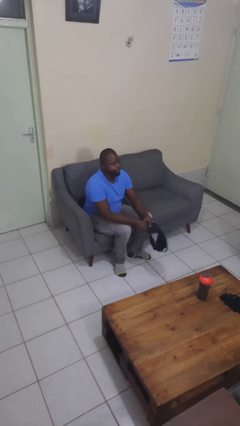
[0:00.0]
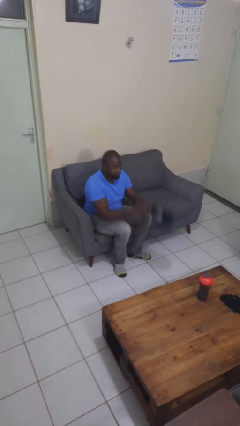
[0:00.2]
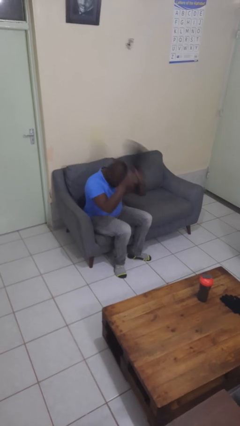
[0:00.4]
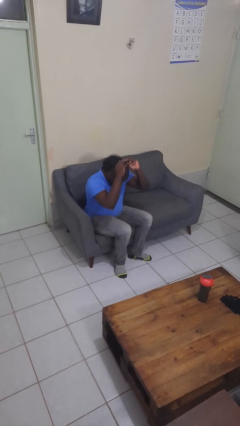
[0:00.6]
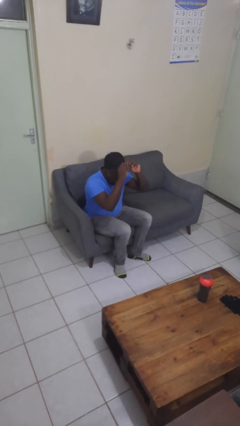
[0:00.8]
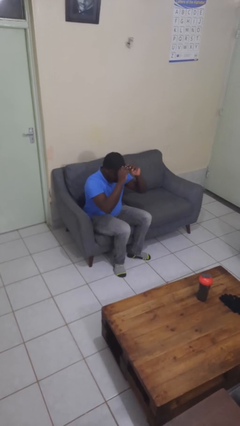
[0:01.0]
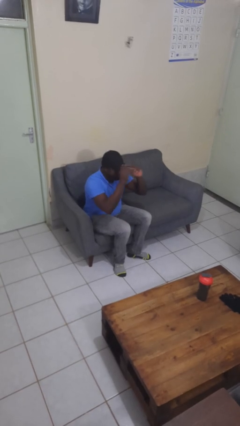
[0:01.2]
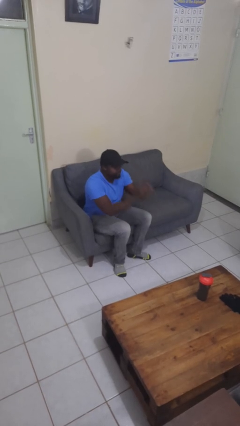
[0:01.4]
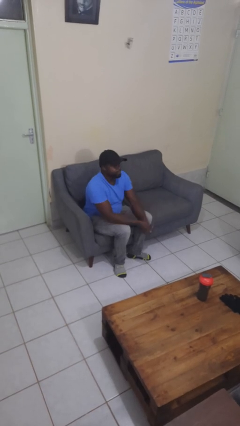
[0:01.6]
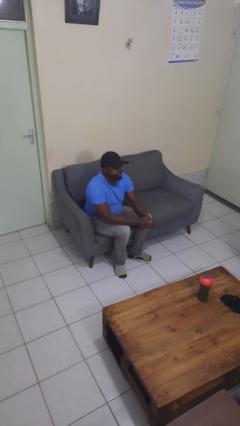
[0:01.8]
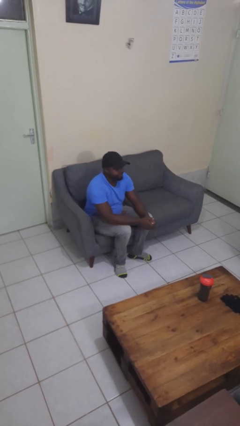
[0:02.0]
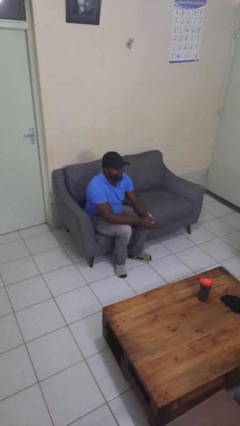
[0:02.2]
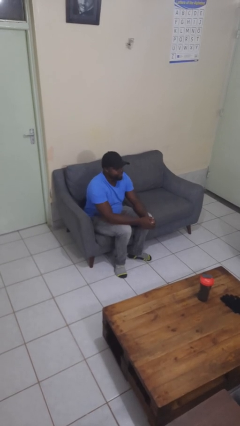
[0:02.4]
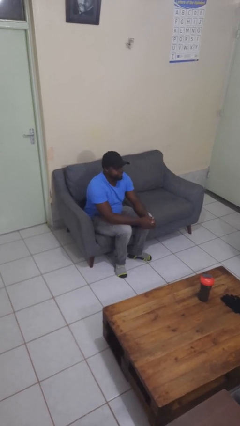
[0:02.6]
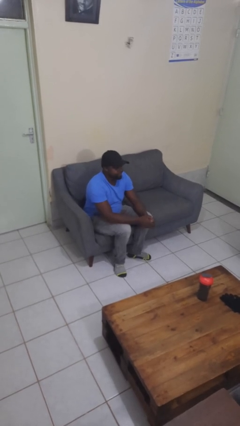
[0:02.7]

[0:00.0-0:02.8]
person puts on hat

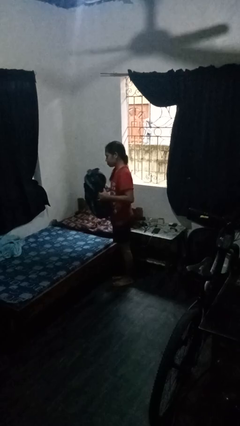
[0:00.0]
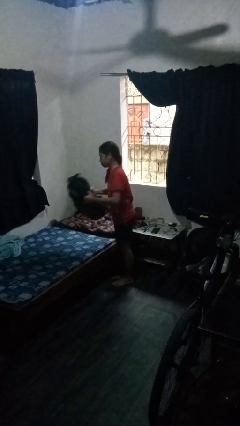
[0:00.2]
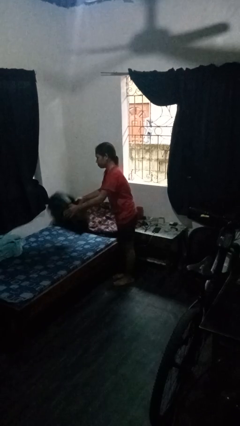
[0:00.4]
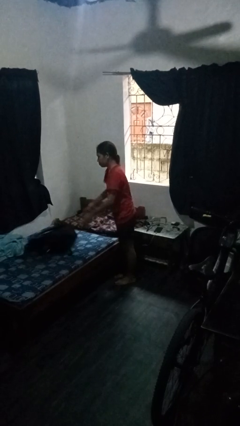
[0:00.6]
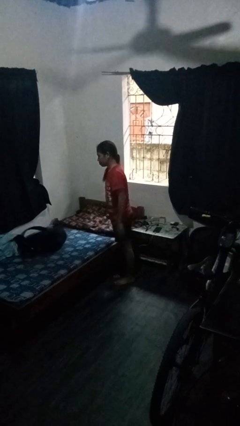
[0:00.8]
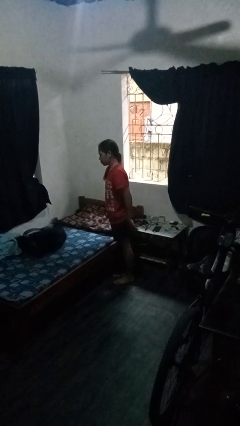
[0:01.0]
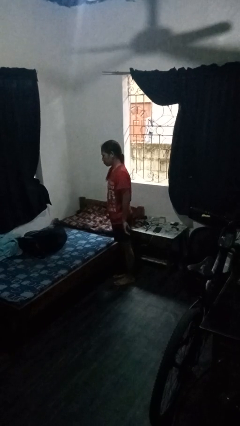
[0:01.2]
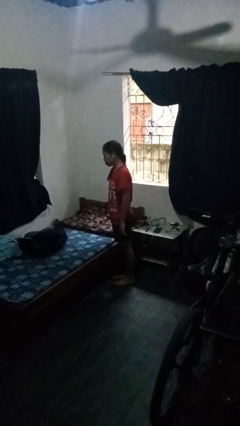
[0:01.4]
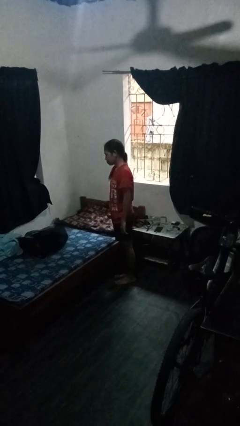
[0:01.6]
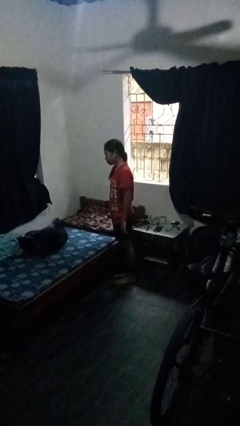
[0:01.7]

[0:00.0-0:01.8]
person throws object on bed

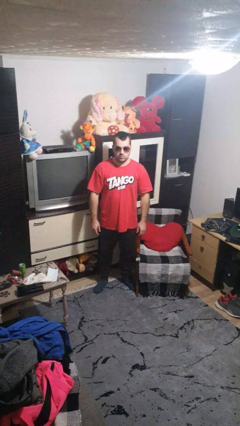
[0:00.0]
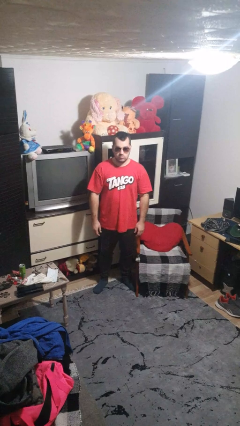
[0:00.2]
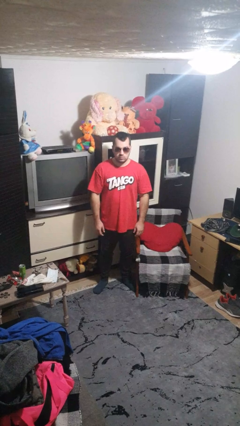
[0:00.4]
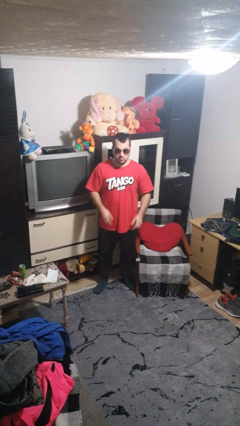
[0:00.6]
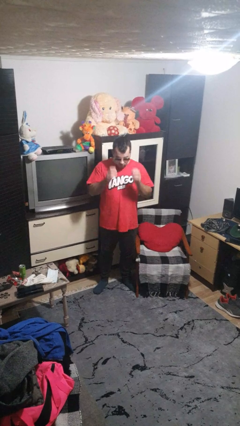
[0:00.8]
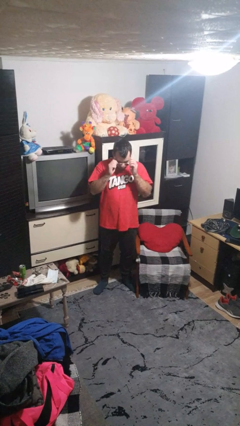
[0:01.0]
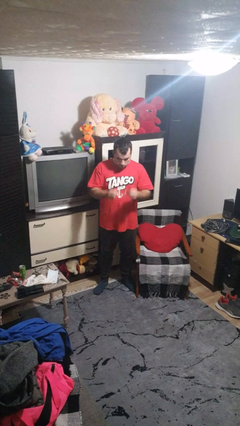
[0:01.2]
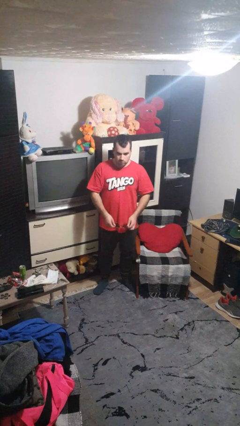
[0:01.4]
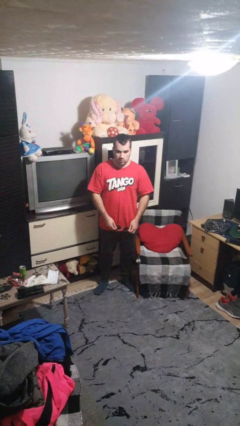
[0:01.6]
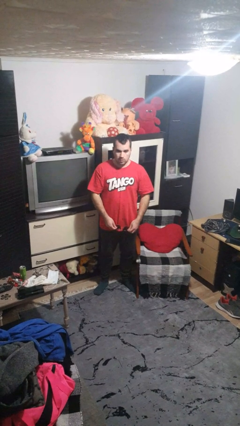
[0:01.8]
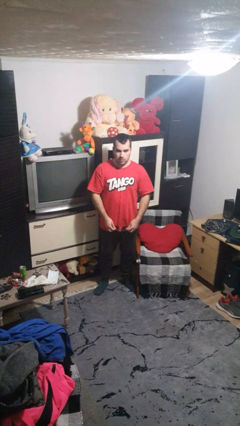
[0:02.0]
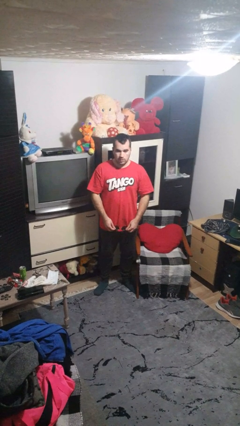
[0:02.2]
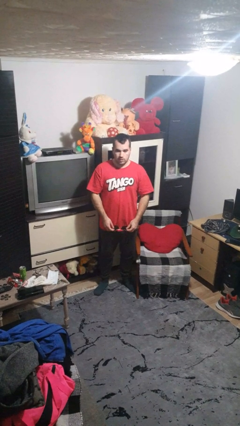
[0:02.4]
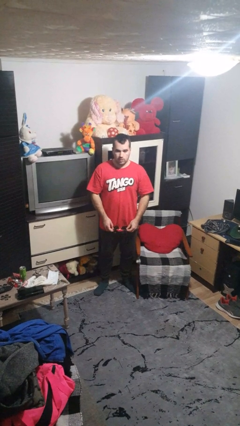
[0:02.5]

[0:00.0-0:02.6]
person takes off sunglasses

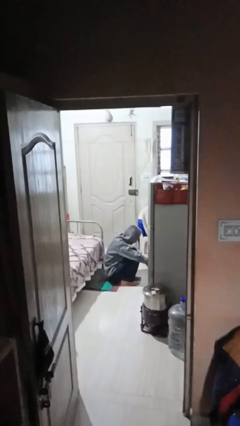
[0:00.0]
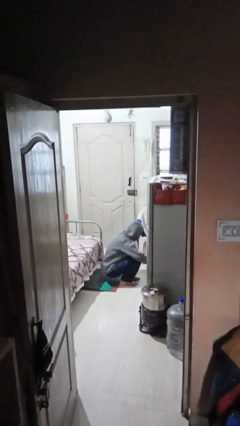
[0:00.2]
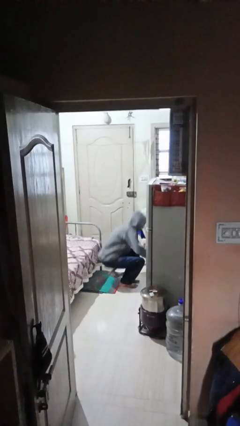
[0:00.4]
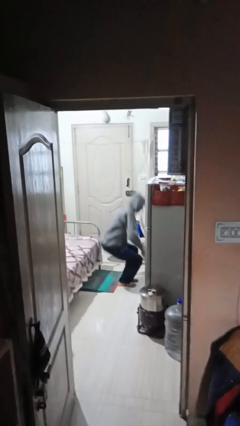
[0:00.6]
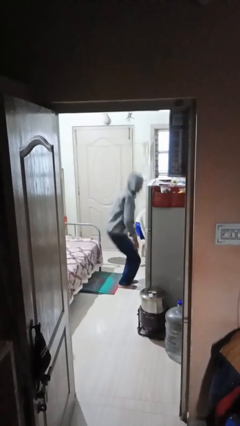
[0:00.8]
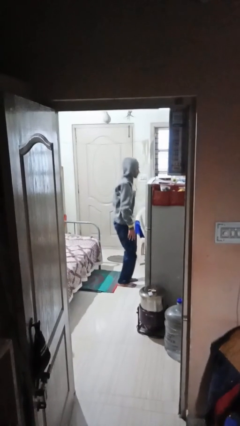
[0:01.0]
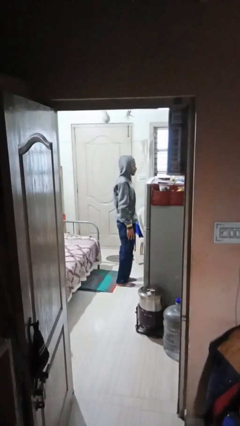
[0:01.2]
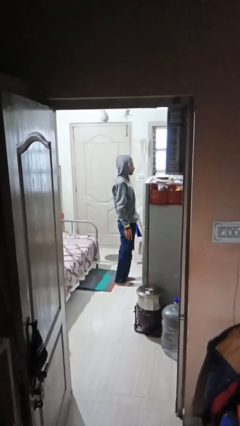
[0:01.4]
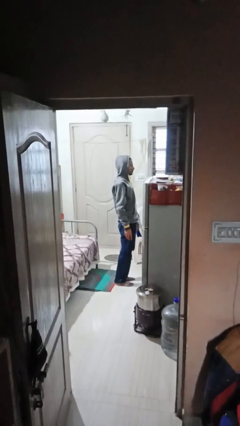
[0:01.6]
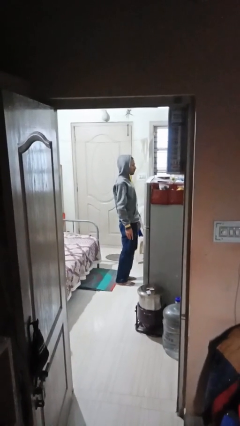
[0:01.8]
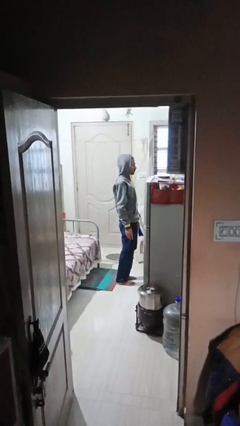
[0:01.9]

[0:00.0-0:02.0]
person stands up

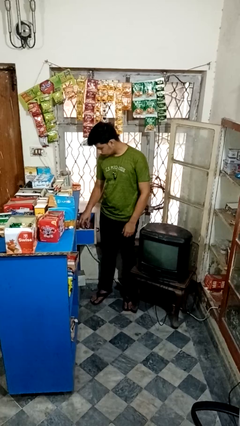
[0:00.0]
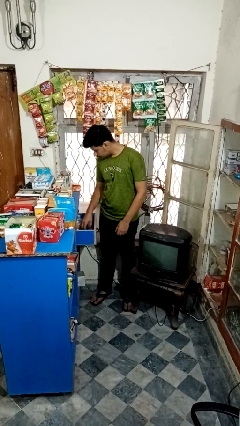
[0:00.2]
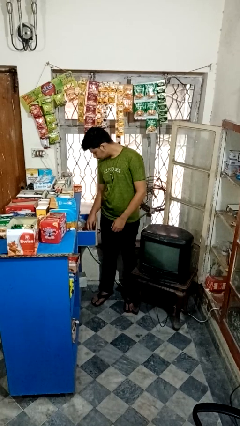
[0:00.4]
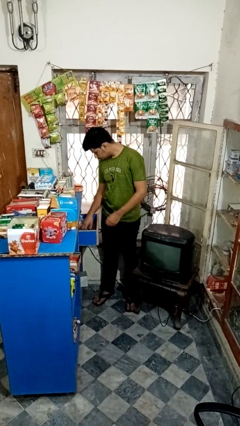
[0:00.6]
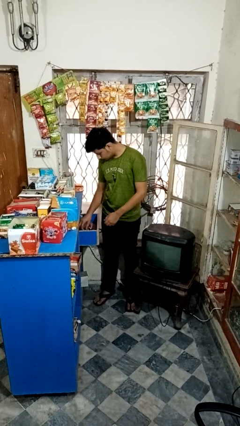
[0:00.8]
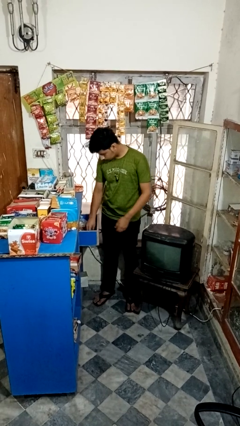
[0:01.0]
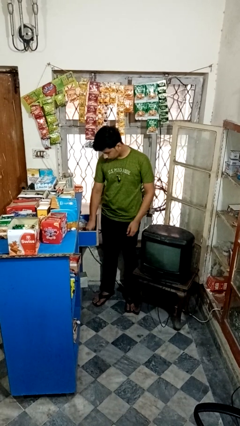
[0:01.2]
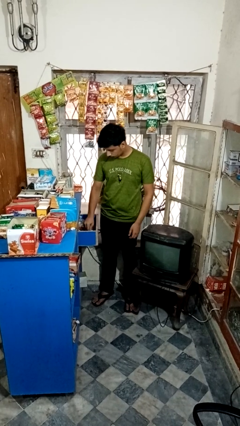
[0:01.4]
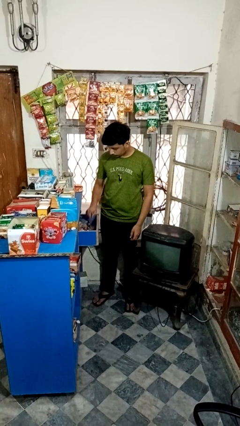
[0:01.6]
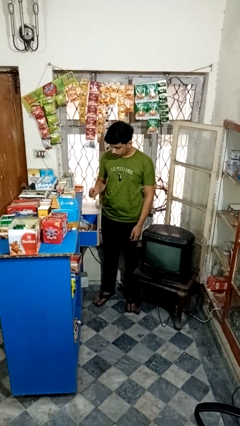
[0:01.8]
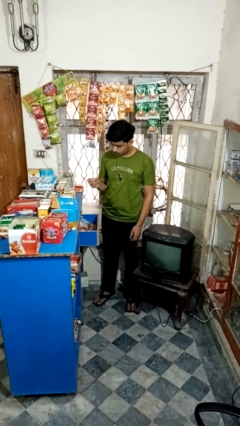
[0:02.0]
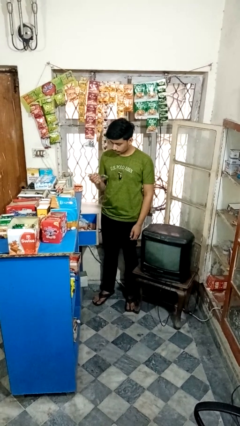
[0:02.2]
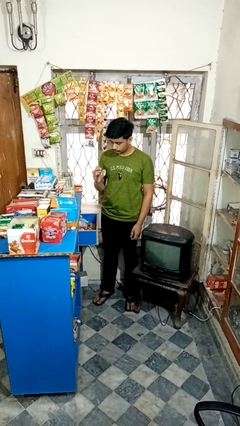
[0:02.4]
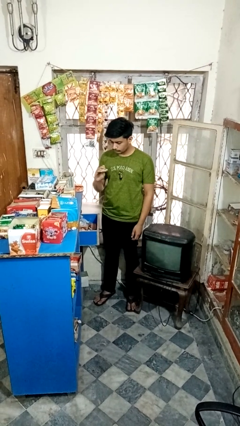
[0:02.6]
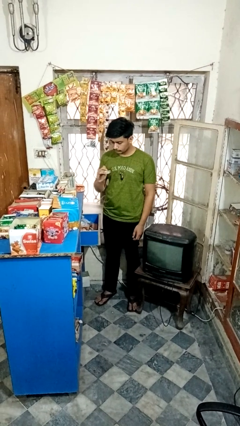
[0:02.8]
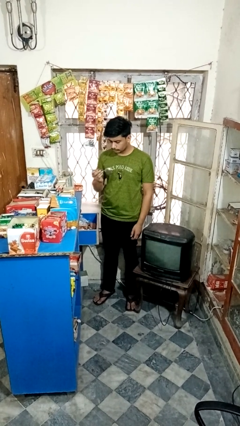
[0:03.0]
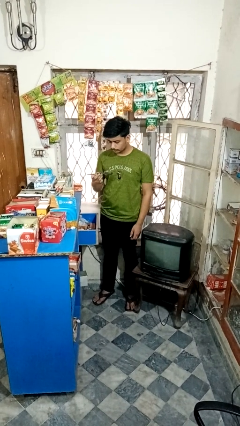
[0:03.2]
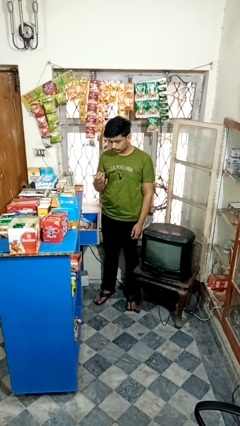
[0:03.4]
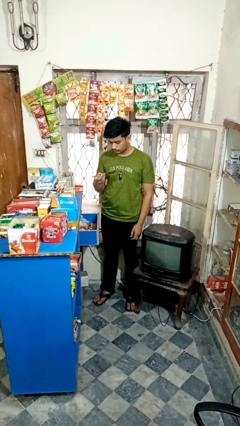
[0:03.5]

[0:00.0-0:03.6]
person searches in kitchen drawer

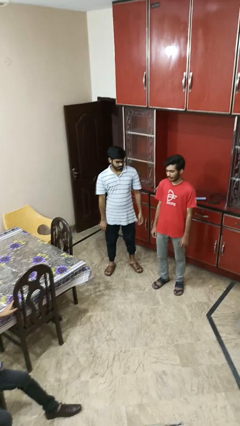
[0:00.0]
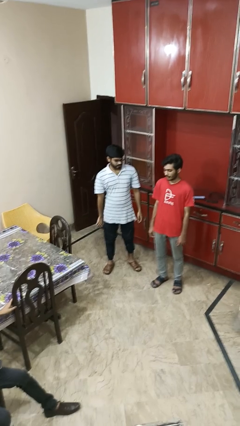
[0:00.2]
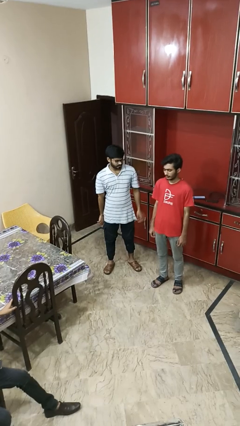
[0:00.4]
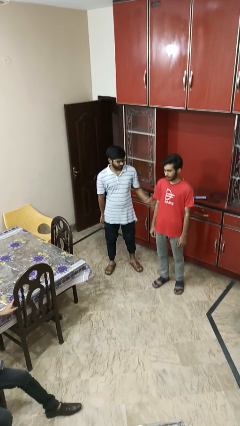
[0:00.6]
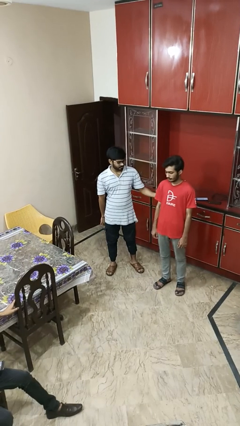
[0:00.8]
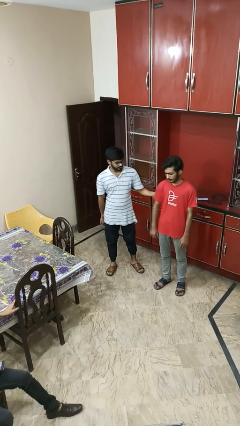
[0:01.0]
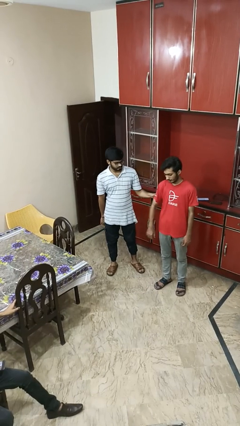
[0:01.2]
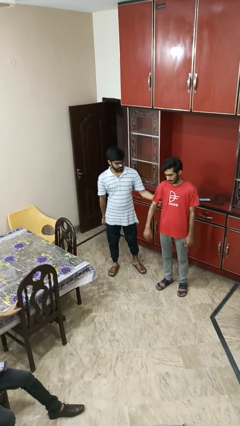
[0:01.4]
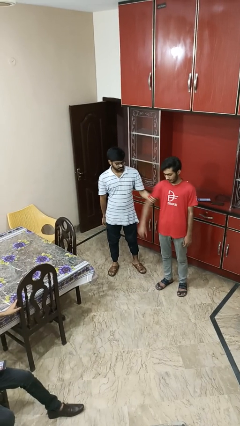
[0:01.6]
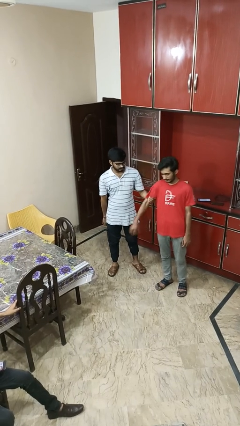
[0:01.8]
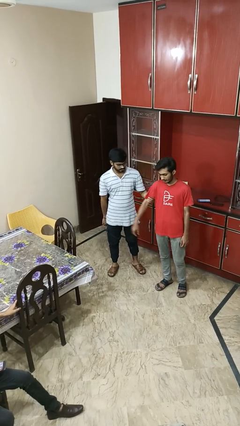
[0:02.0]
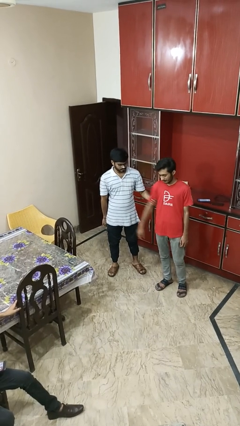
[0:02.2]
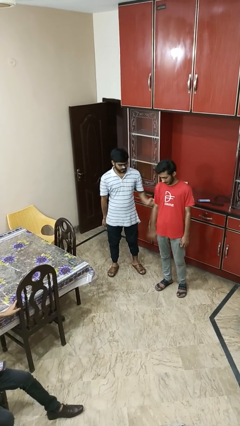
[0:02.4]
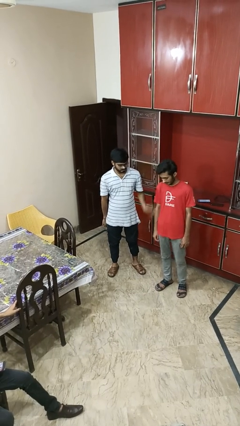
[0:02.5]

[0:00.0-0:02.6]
person grabs person by bicep

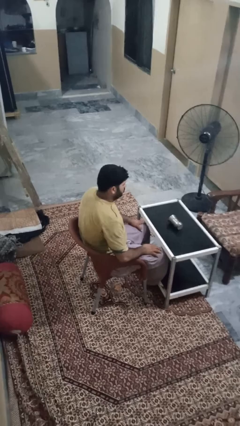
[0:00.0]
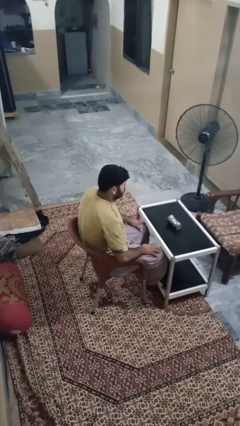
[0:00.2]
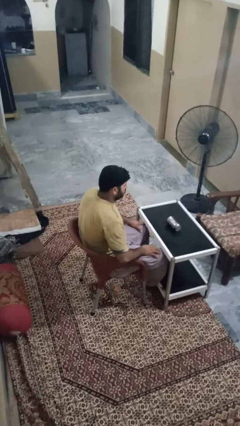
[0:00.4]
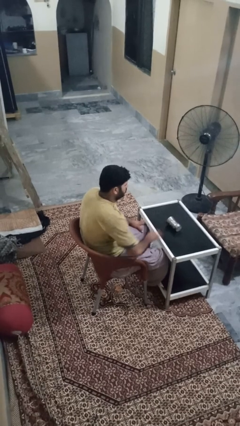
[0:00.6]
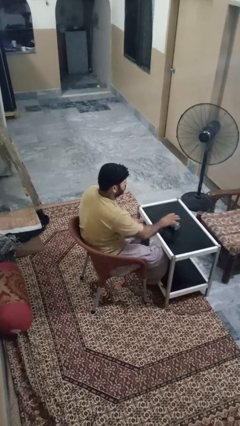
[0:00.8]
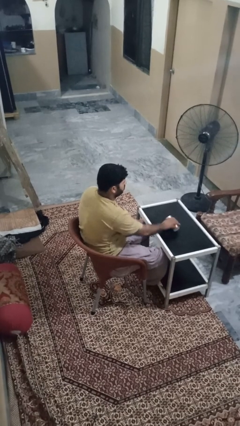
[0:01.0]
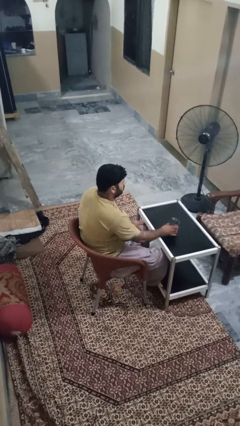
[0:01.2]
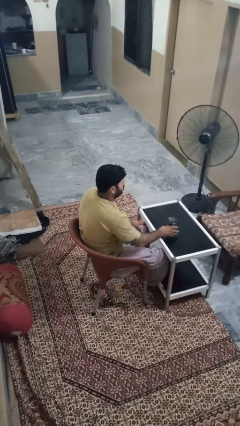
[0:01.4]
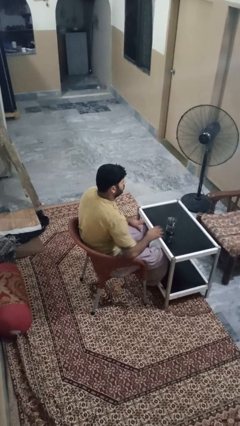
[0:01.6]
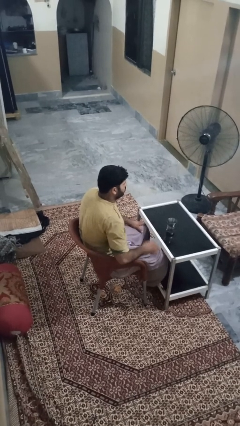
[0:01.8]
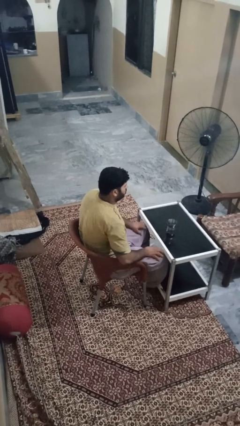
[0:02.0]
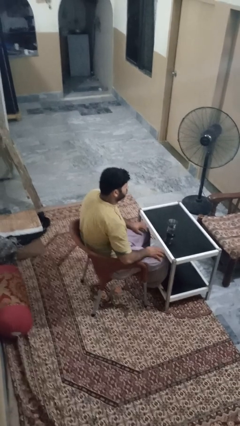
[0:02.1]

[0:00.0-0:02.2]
person sets upright glass
